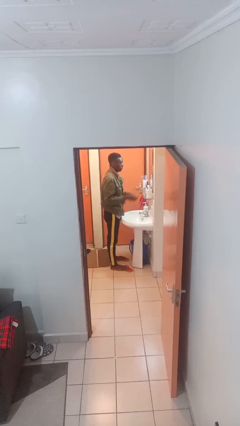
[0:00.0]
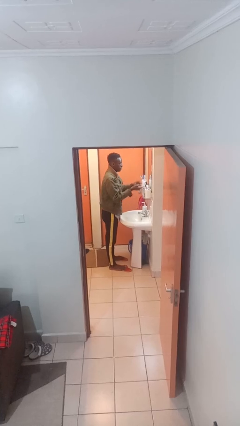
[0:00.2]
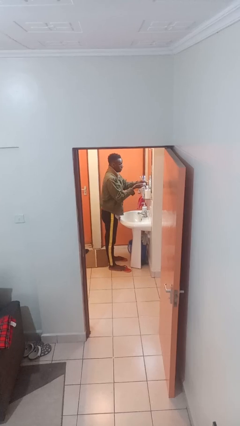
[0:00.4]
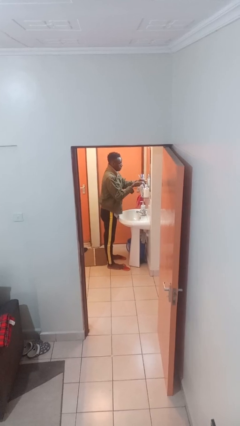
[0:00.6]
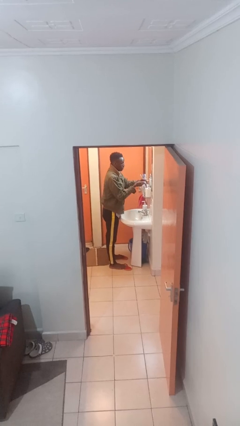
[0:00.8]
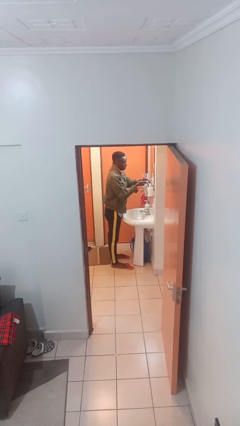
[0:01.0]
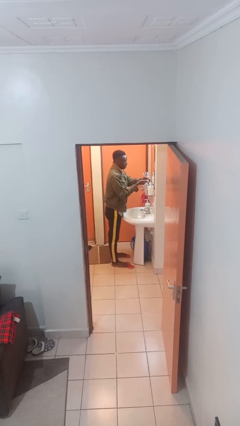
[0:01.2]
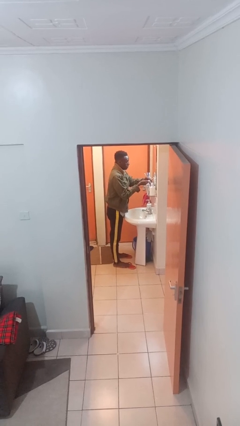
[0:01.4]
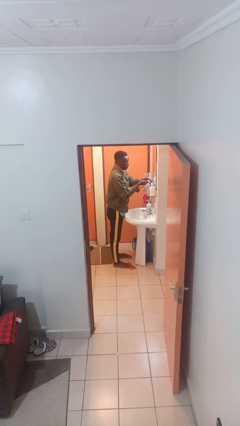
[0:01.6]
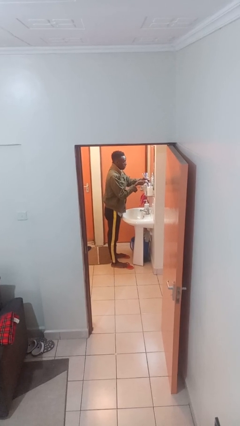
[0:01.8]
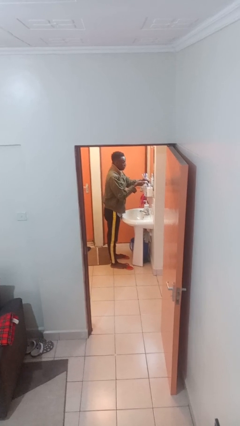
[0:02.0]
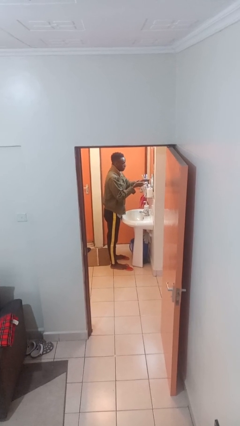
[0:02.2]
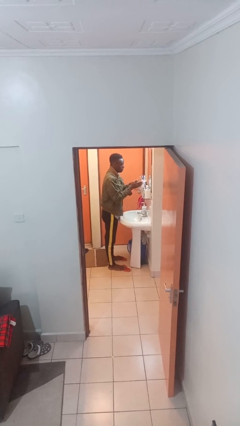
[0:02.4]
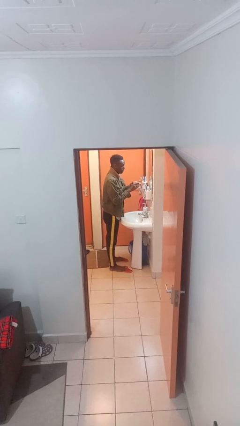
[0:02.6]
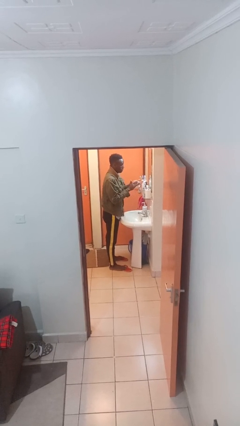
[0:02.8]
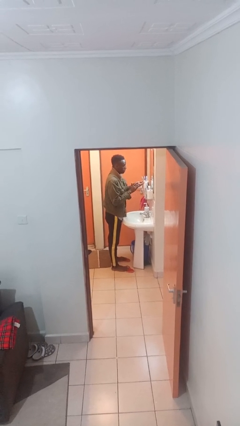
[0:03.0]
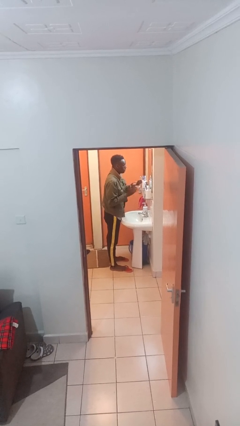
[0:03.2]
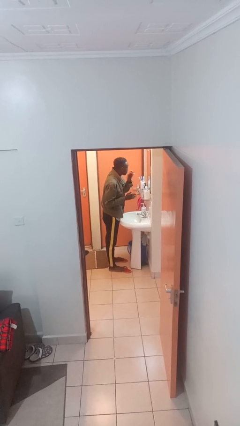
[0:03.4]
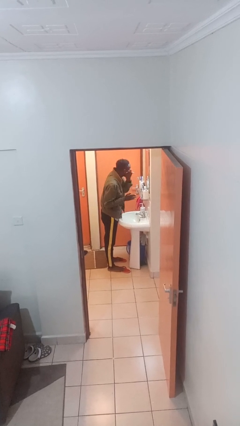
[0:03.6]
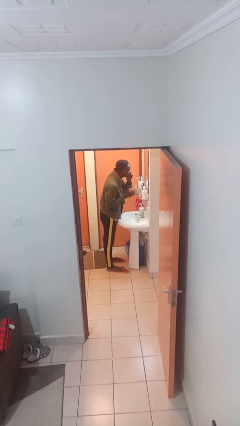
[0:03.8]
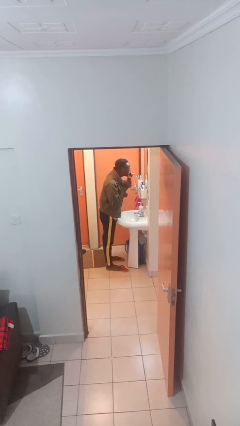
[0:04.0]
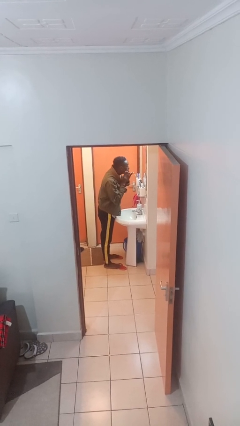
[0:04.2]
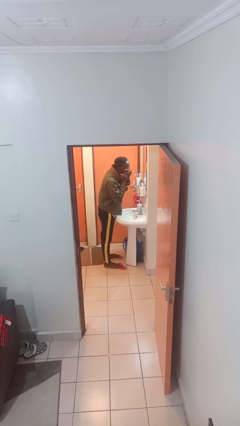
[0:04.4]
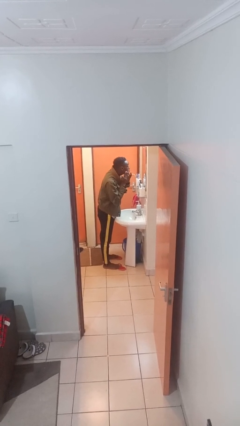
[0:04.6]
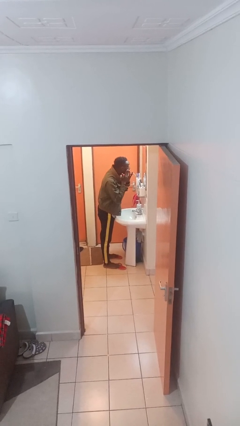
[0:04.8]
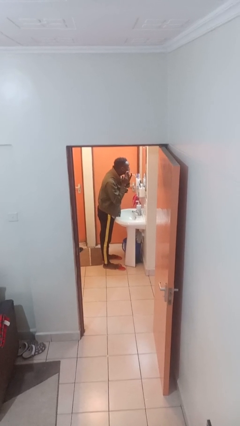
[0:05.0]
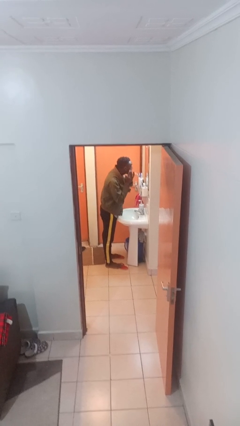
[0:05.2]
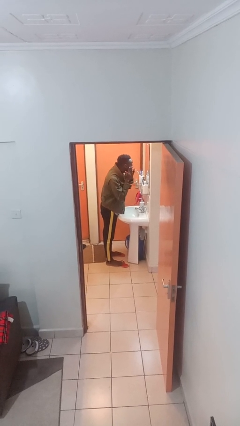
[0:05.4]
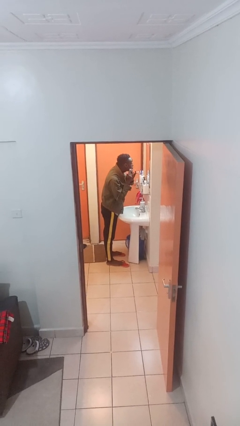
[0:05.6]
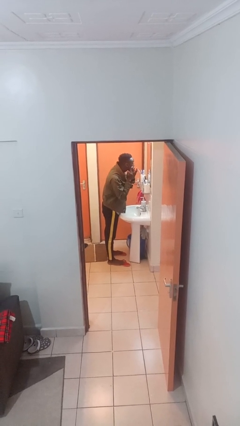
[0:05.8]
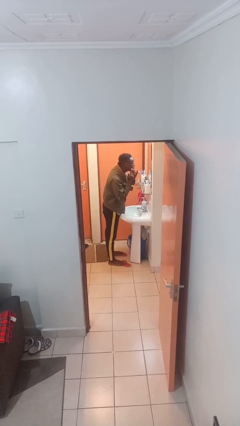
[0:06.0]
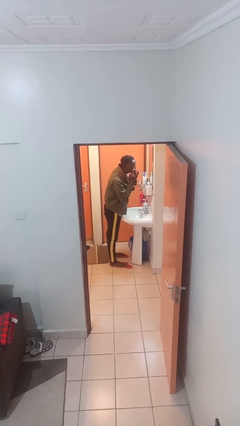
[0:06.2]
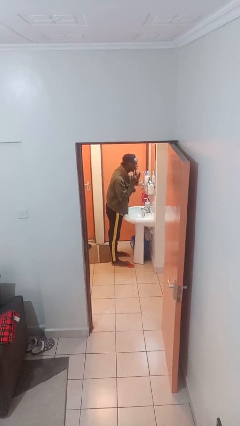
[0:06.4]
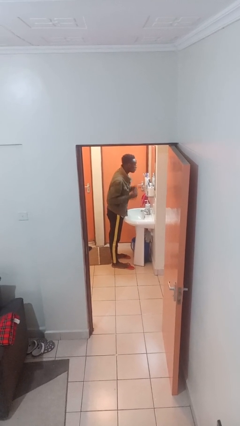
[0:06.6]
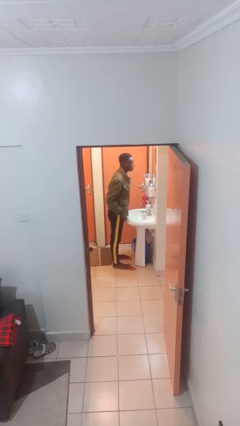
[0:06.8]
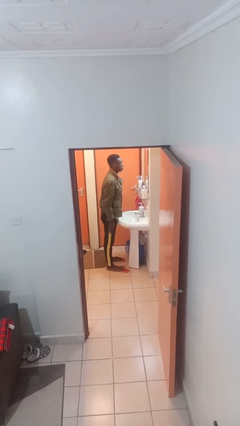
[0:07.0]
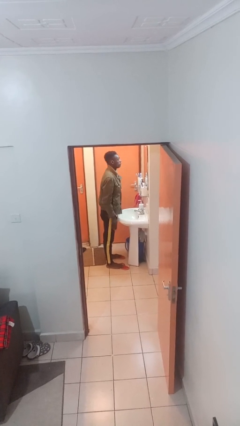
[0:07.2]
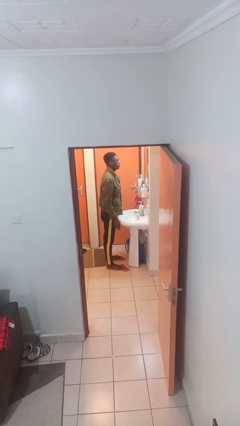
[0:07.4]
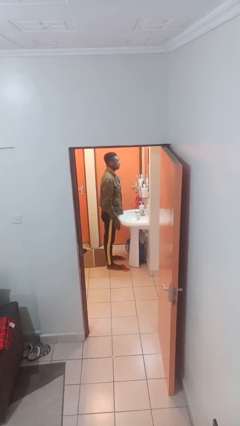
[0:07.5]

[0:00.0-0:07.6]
person applies shaving cream

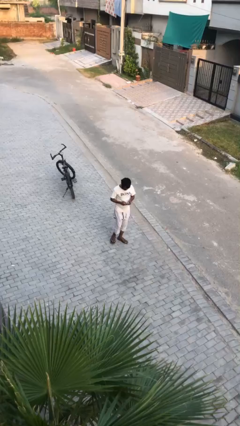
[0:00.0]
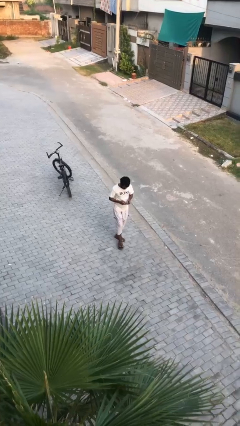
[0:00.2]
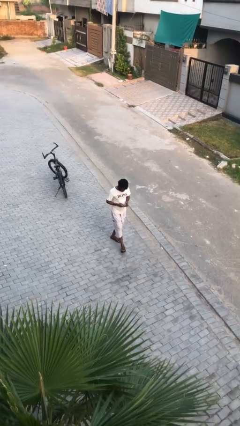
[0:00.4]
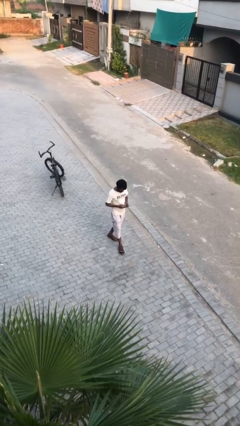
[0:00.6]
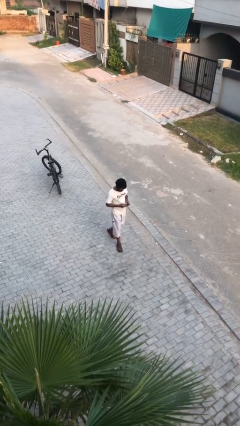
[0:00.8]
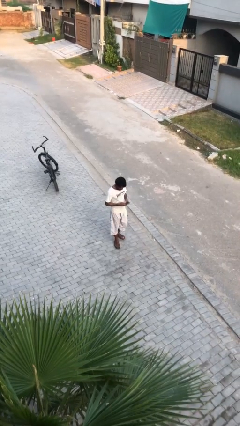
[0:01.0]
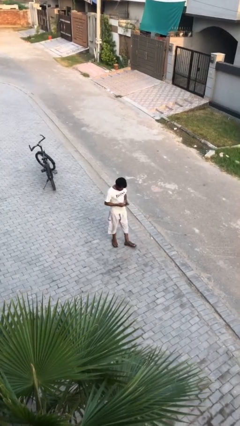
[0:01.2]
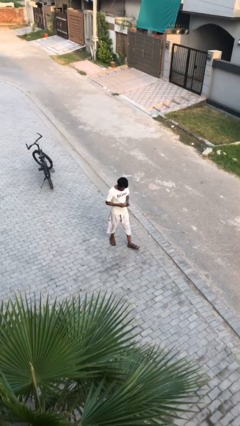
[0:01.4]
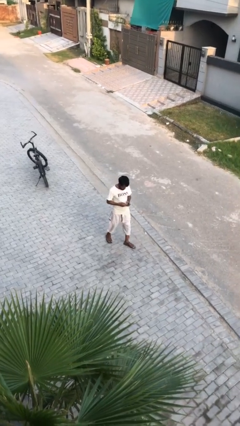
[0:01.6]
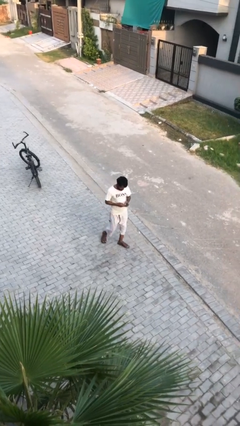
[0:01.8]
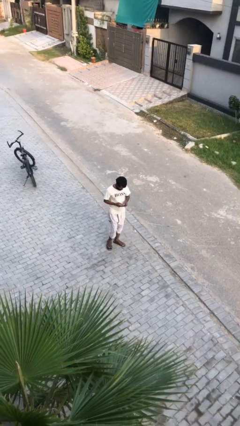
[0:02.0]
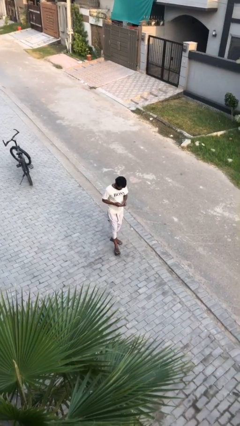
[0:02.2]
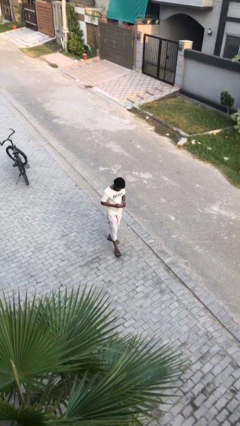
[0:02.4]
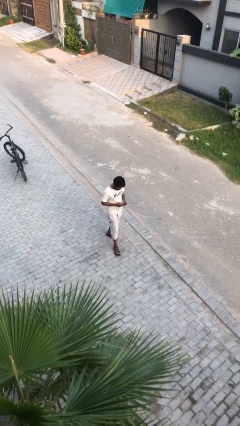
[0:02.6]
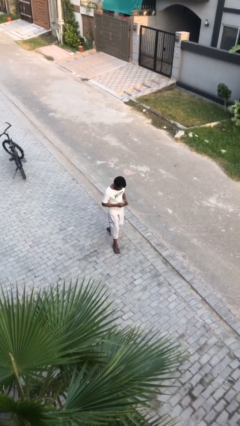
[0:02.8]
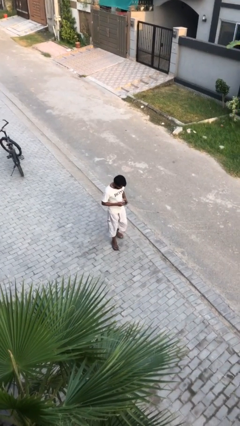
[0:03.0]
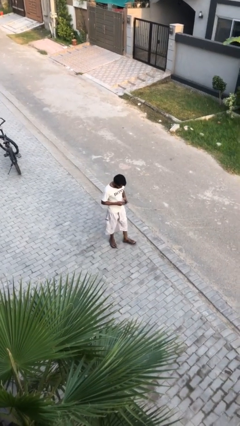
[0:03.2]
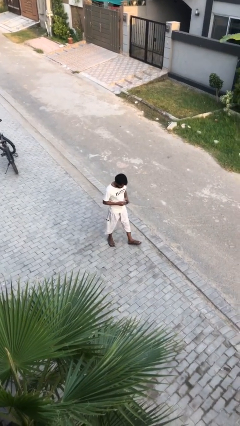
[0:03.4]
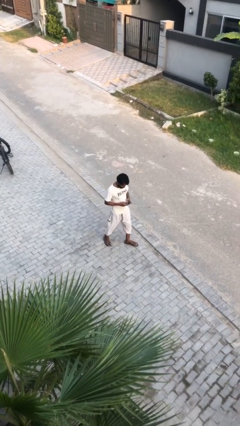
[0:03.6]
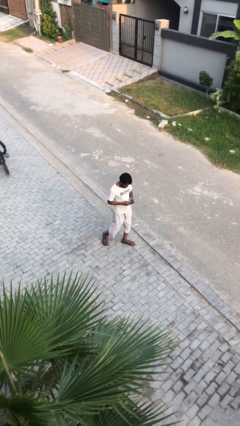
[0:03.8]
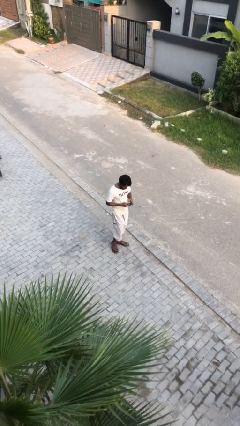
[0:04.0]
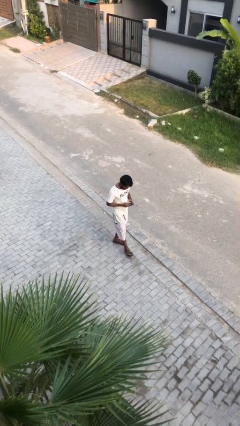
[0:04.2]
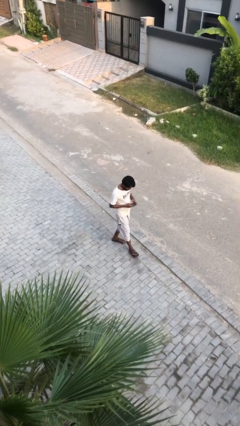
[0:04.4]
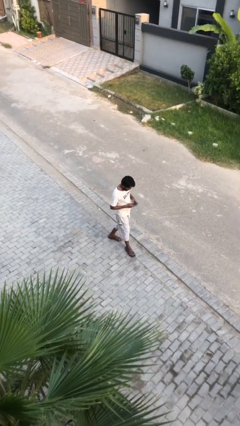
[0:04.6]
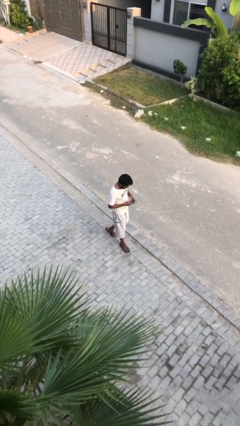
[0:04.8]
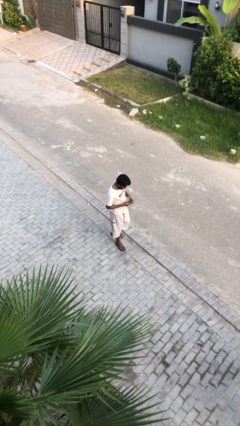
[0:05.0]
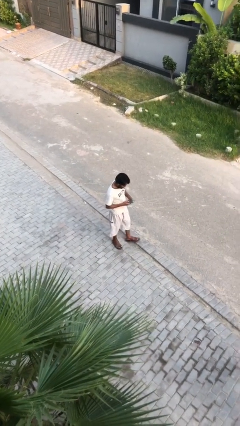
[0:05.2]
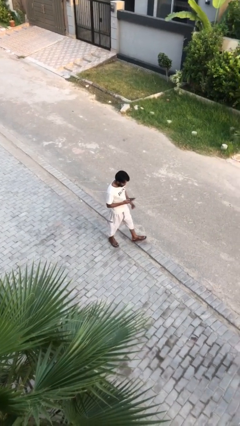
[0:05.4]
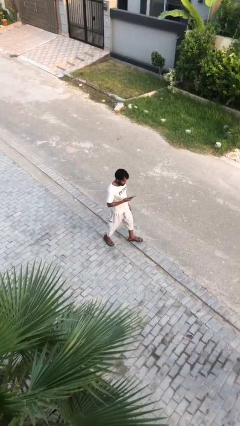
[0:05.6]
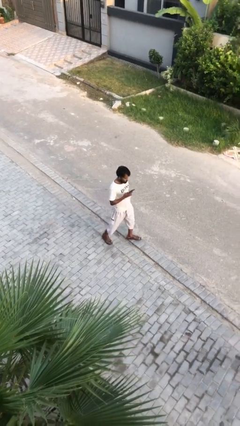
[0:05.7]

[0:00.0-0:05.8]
person texts on phone

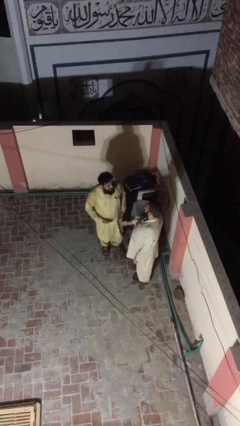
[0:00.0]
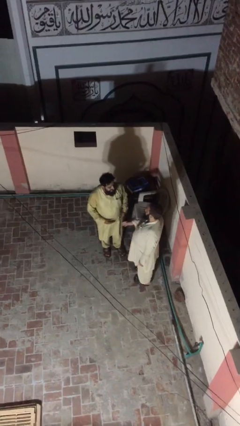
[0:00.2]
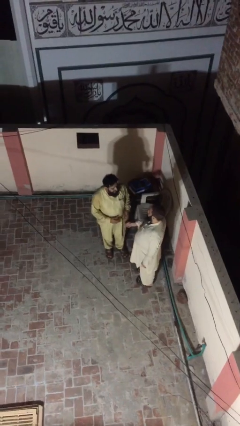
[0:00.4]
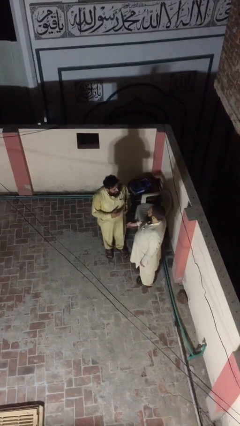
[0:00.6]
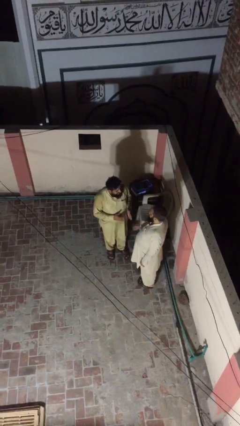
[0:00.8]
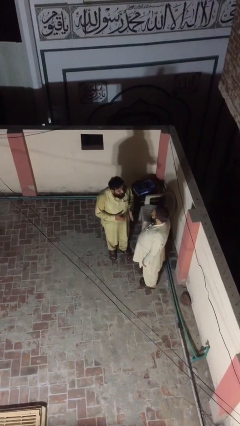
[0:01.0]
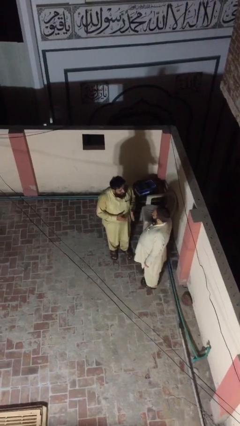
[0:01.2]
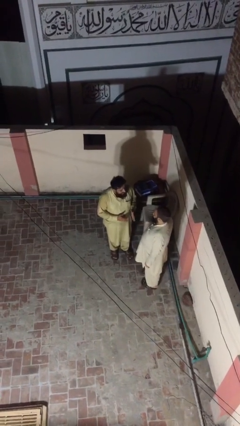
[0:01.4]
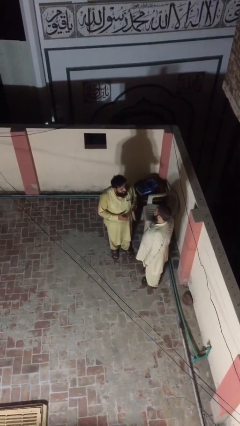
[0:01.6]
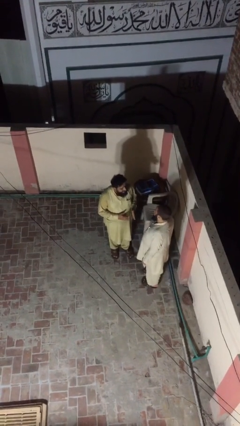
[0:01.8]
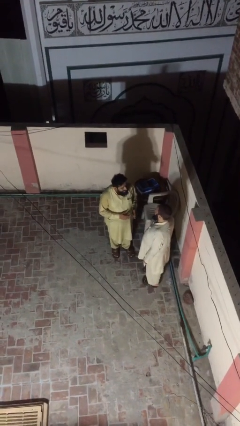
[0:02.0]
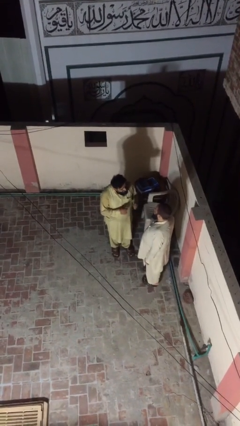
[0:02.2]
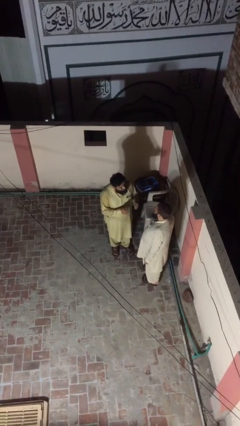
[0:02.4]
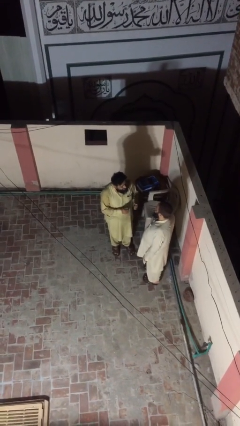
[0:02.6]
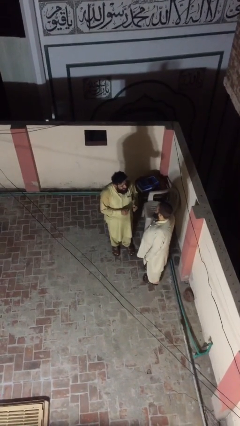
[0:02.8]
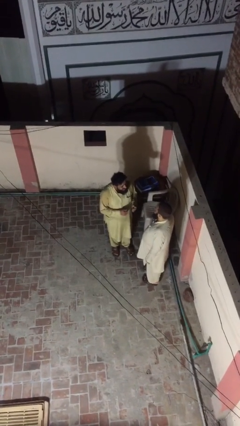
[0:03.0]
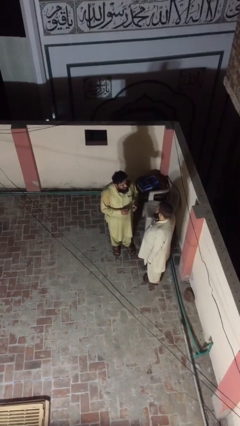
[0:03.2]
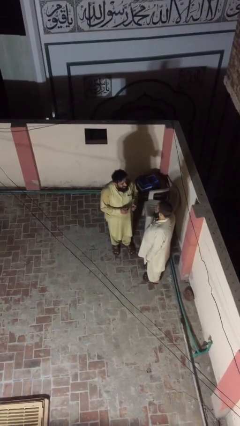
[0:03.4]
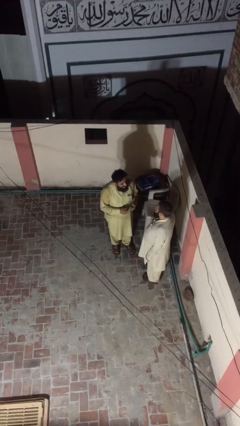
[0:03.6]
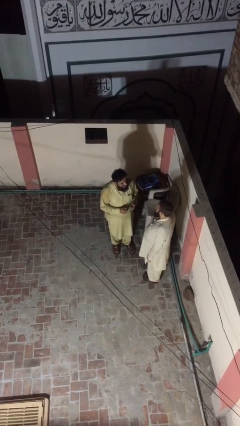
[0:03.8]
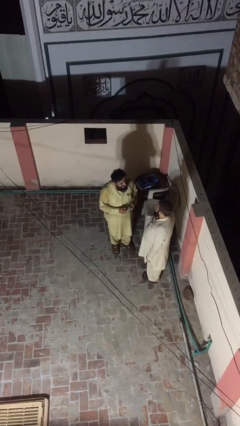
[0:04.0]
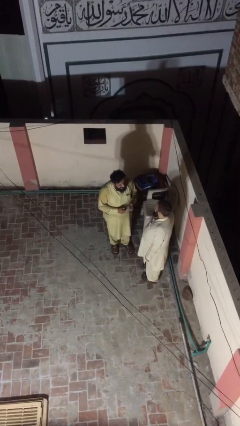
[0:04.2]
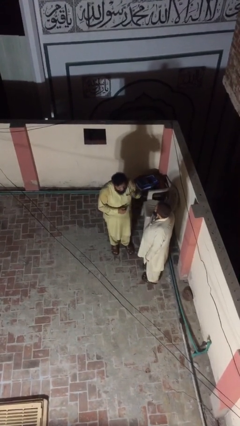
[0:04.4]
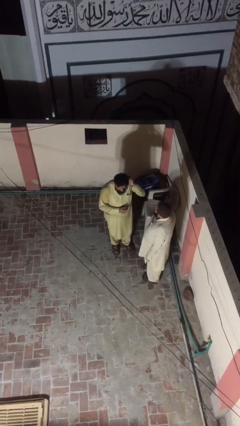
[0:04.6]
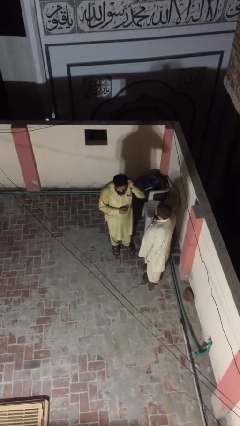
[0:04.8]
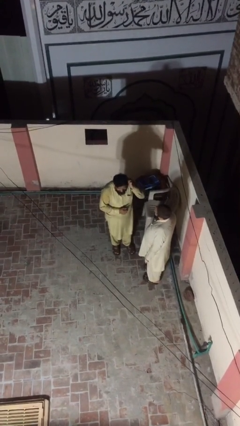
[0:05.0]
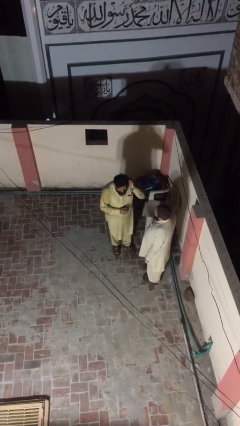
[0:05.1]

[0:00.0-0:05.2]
person talks to person
